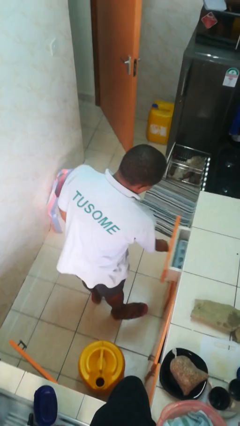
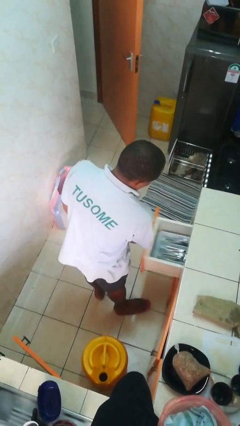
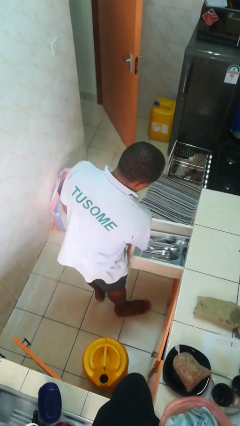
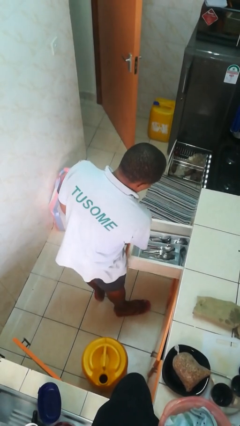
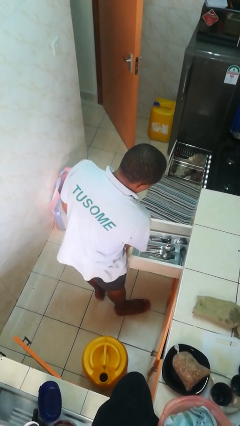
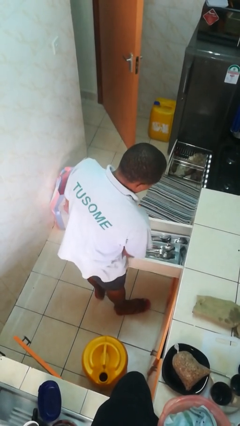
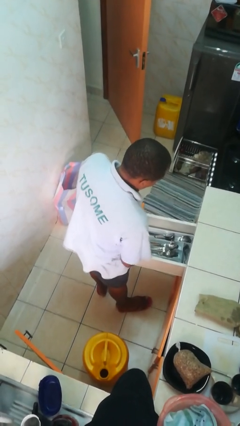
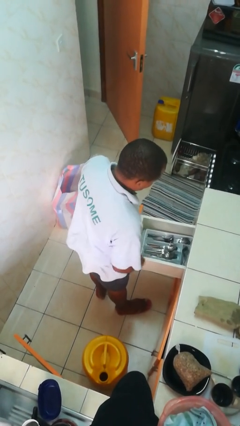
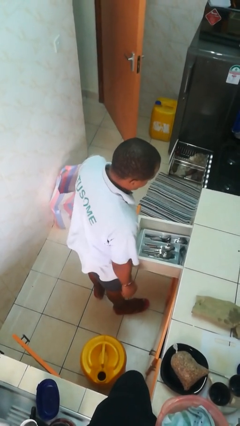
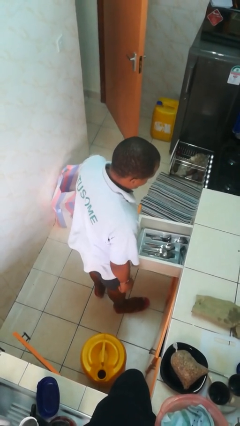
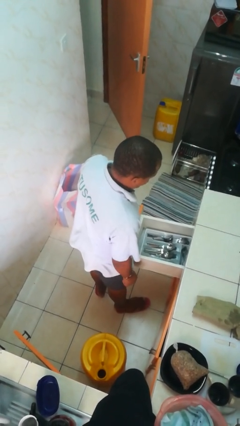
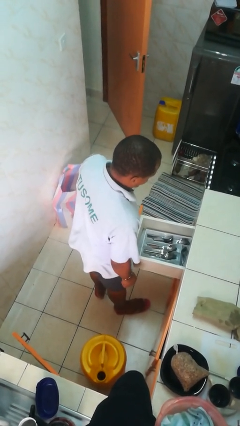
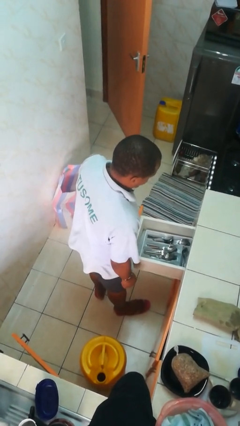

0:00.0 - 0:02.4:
person opens kitchen drawer

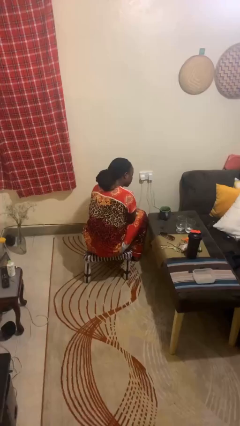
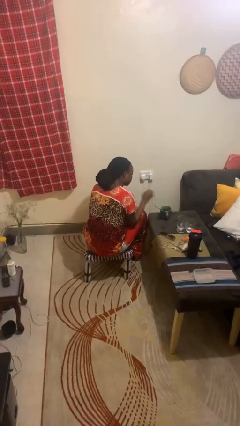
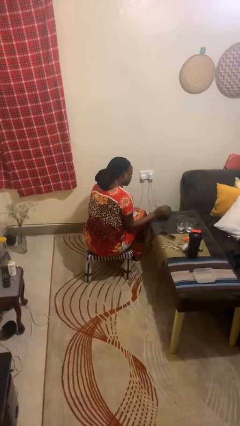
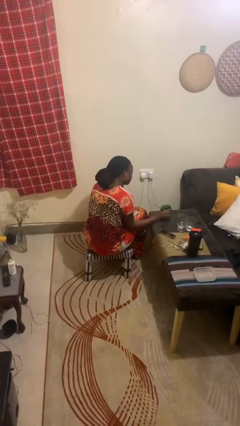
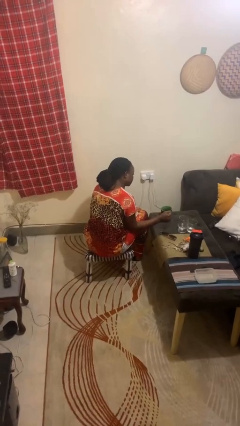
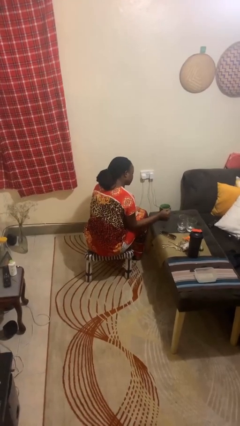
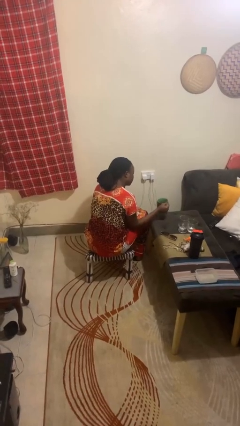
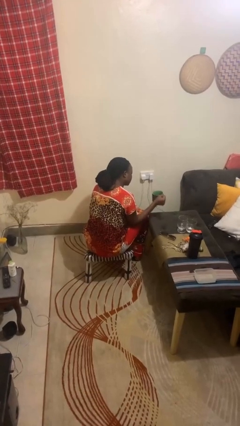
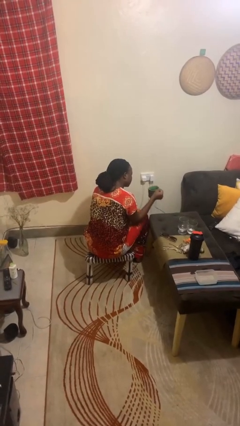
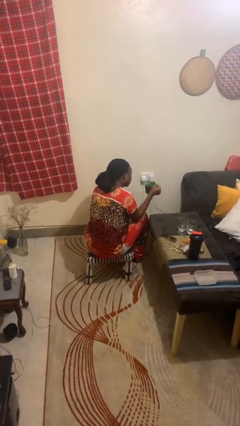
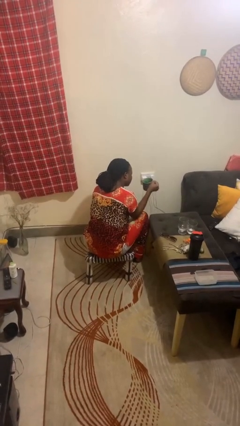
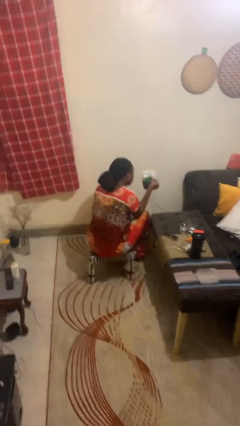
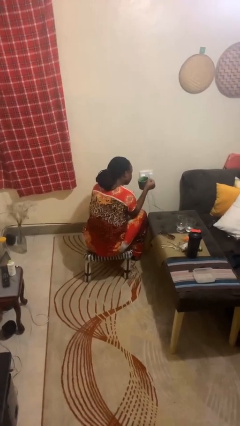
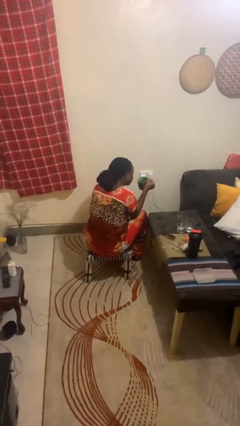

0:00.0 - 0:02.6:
person picks up object from table

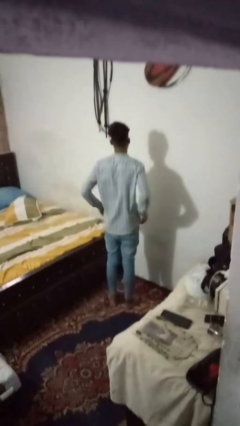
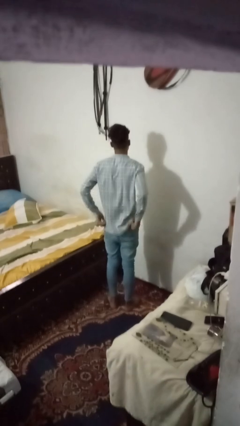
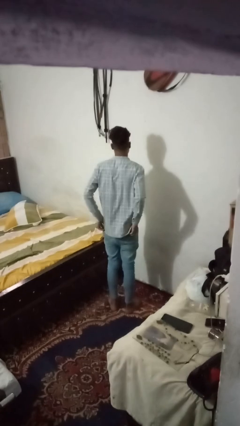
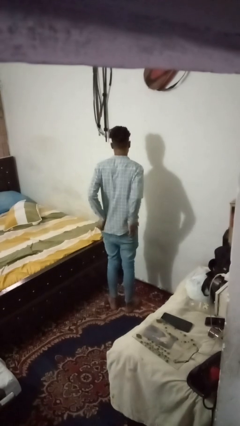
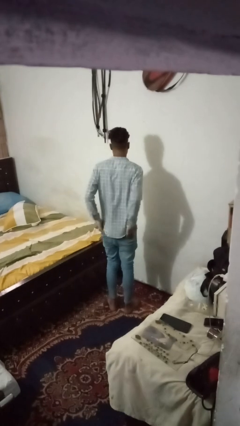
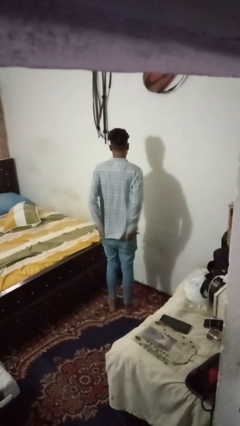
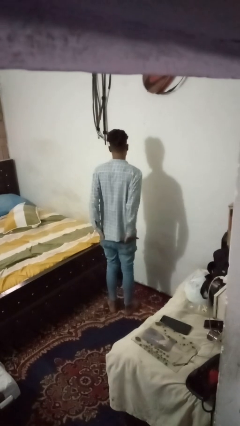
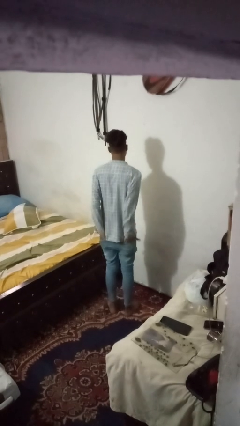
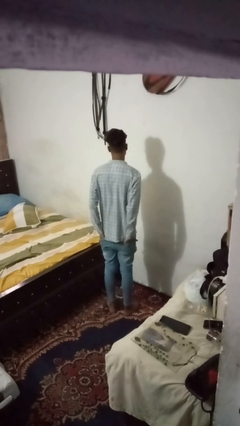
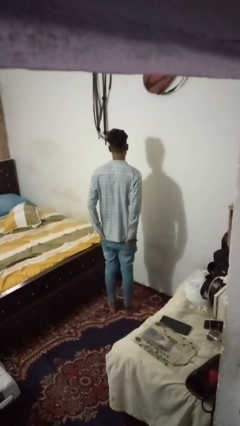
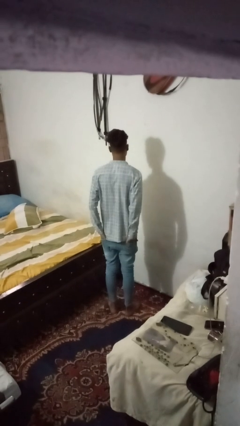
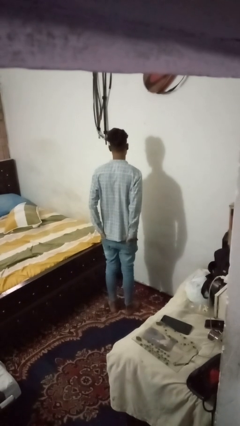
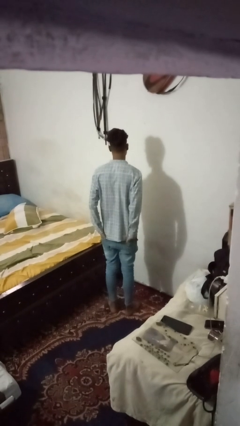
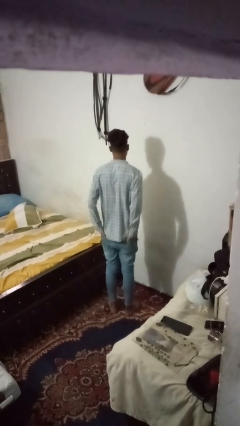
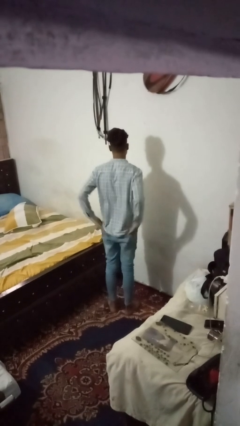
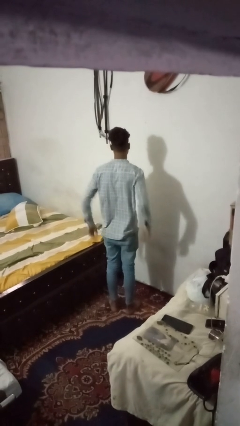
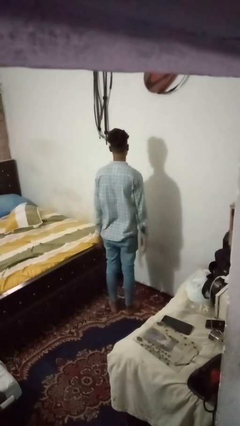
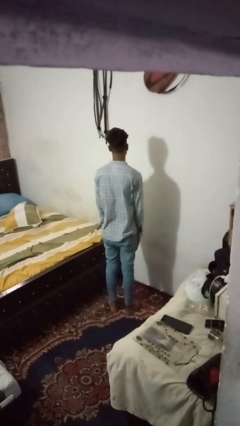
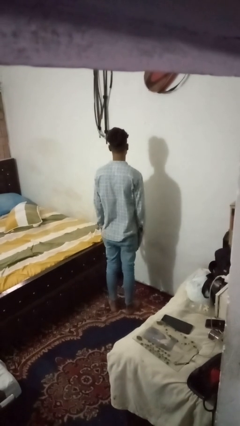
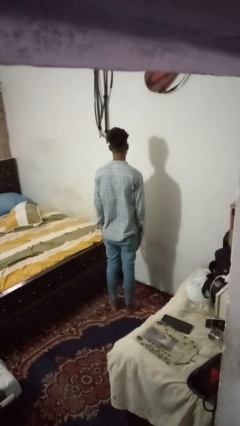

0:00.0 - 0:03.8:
person puts hands in back pockets

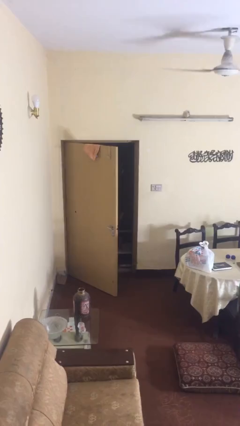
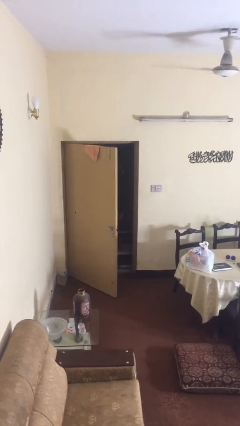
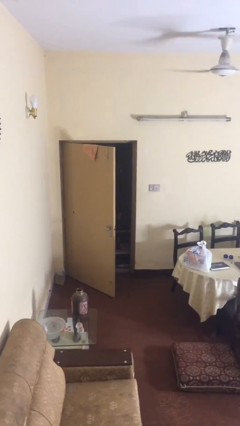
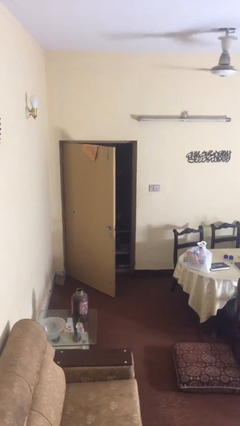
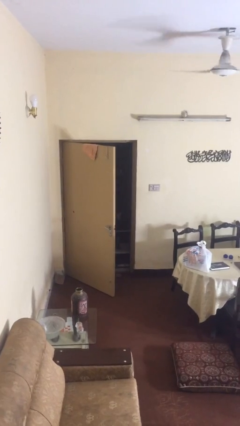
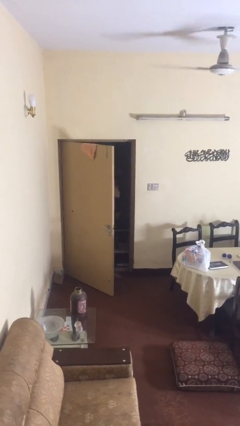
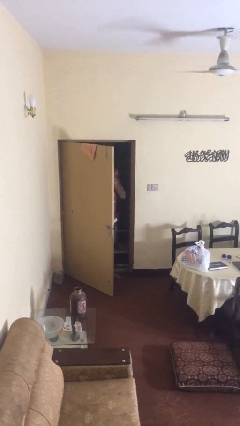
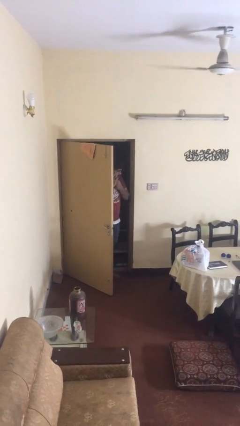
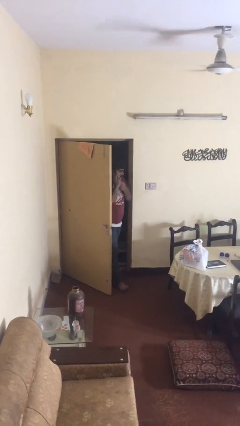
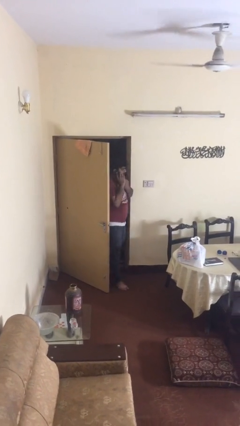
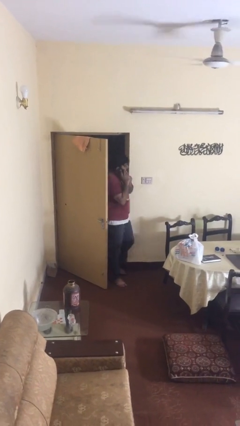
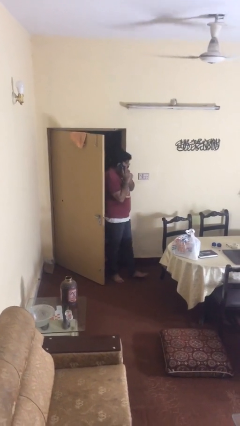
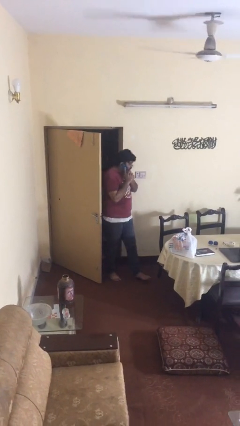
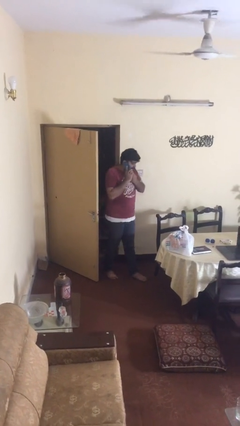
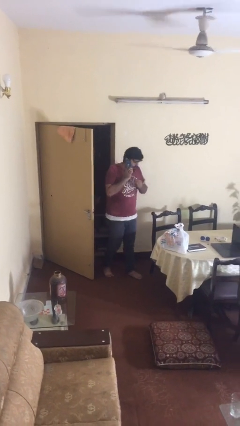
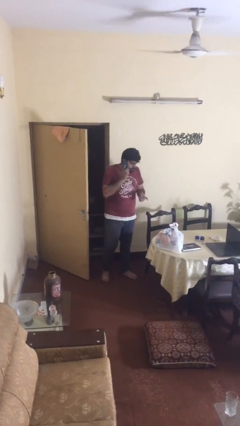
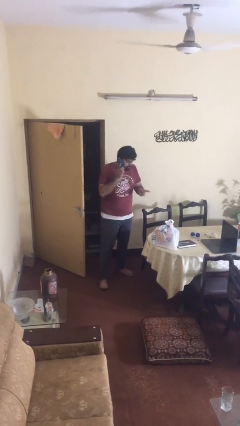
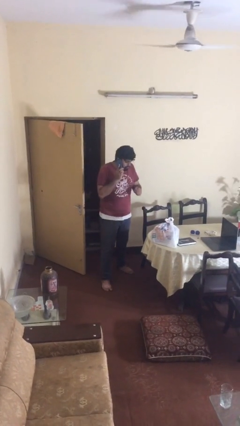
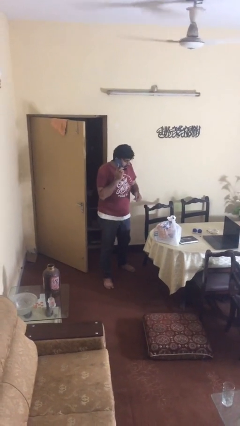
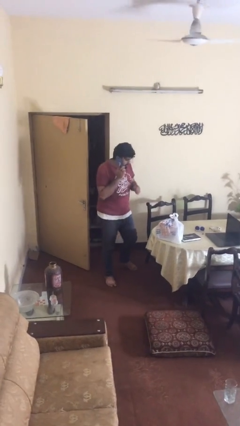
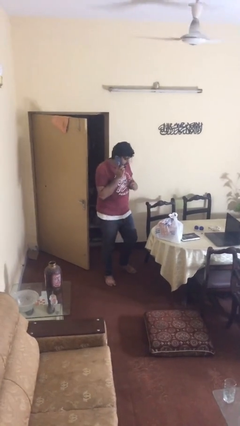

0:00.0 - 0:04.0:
person enters scene through structure

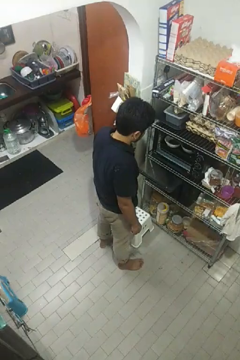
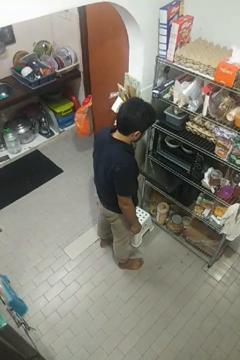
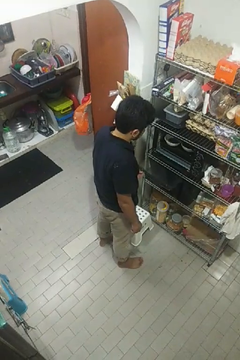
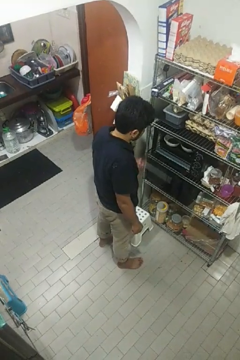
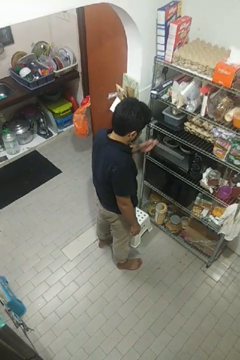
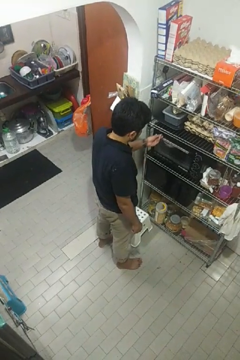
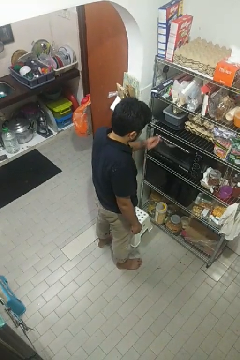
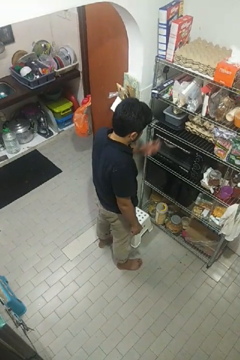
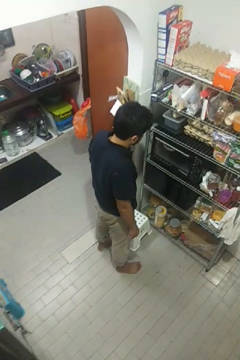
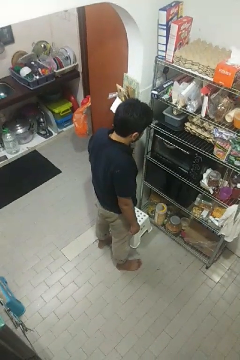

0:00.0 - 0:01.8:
person closes oven door

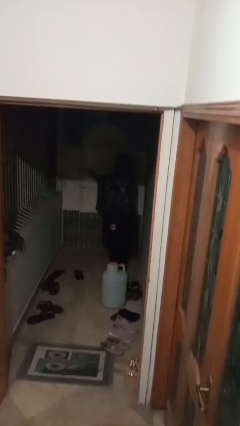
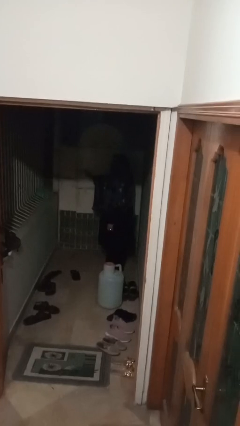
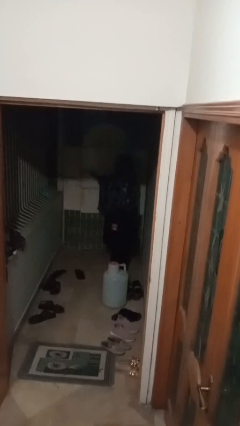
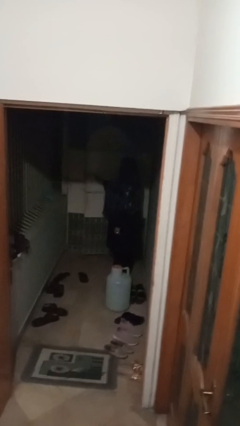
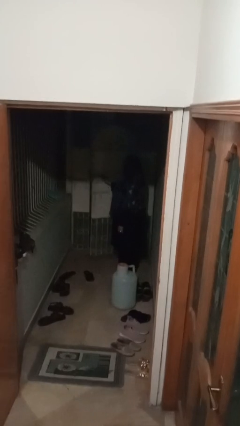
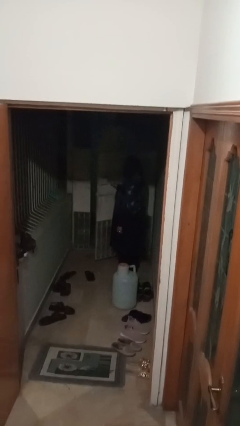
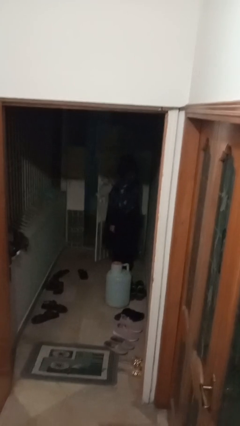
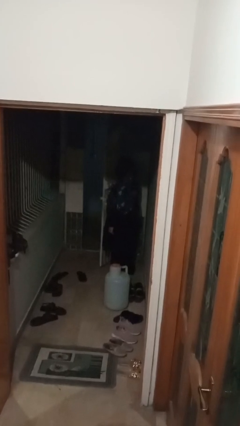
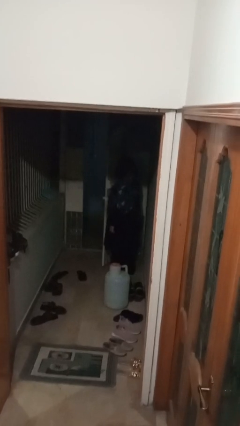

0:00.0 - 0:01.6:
person opens gate

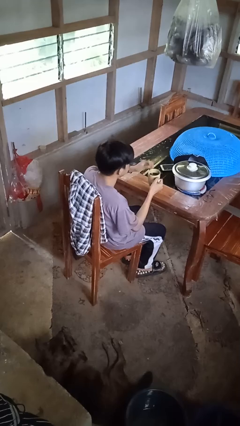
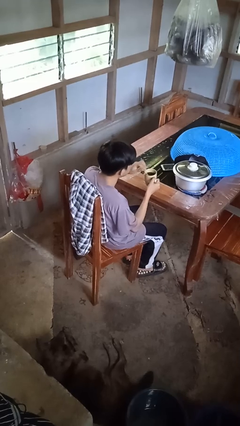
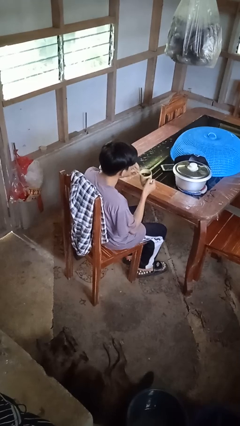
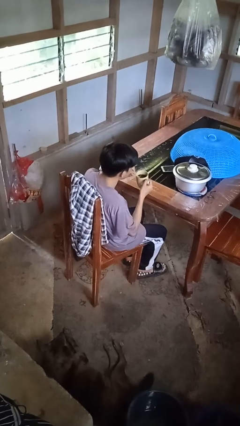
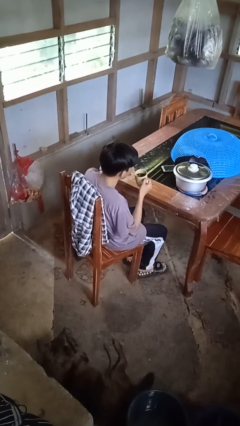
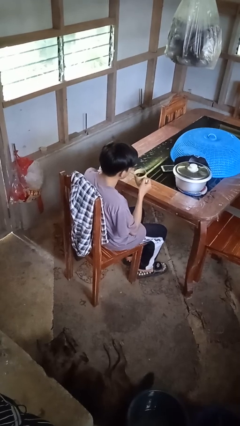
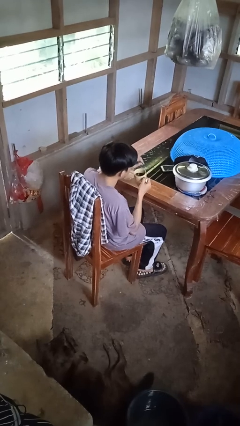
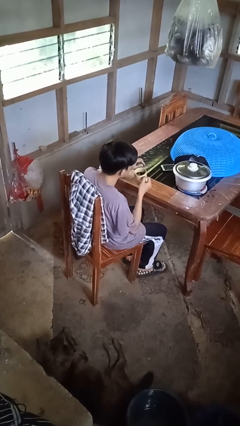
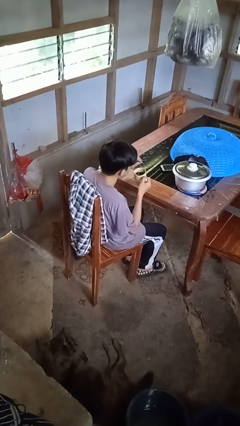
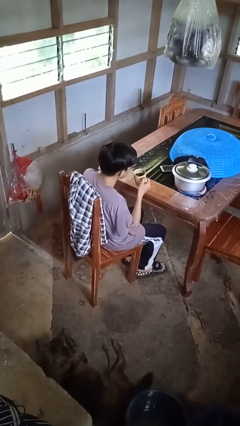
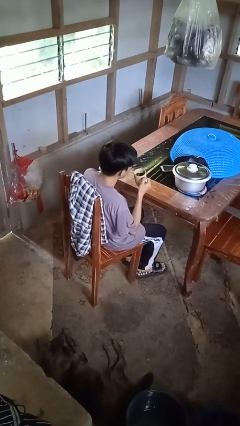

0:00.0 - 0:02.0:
person drinks from straw
